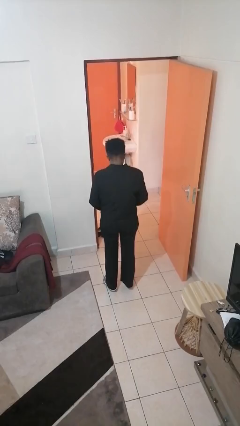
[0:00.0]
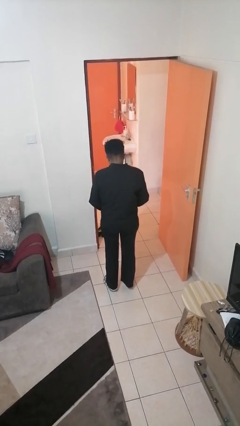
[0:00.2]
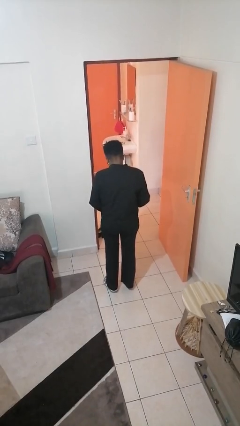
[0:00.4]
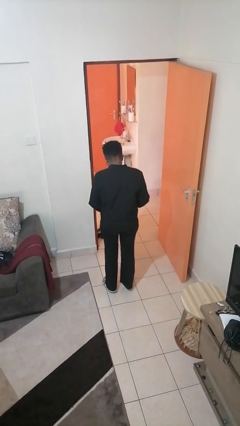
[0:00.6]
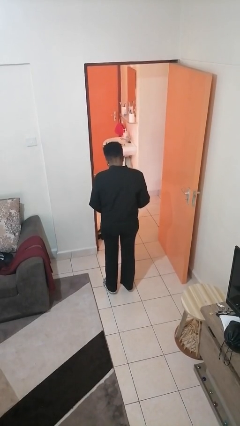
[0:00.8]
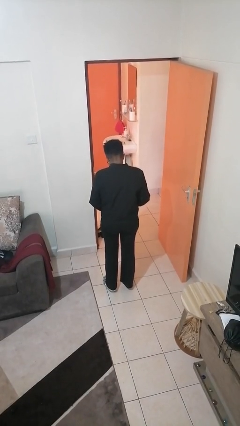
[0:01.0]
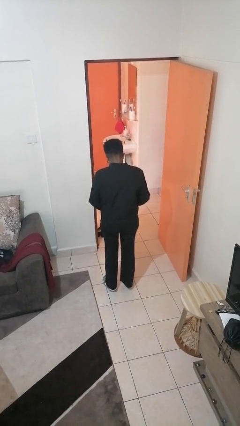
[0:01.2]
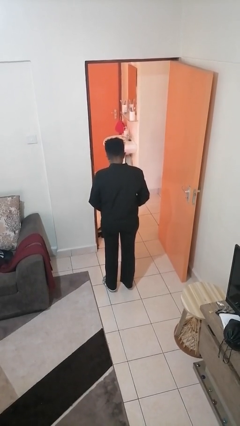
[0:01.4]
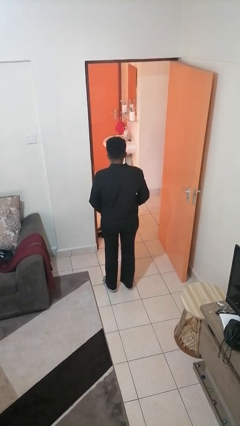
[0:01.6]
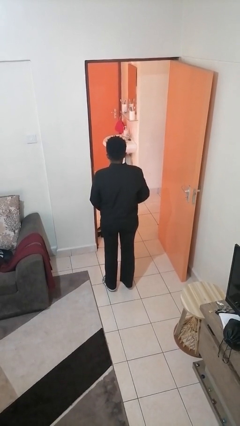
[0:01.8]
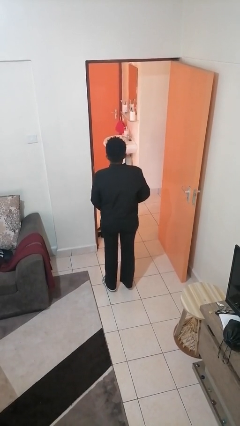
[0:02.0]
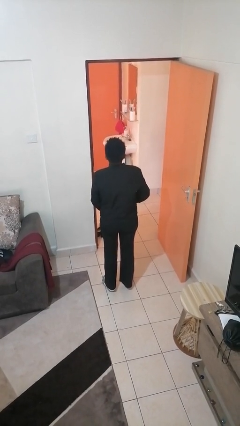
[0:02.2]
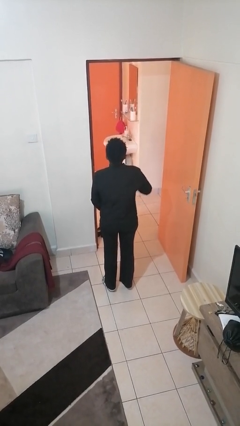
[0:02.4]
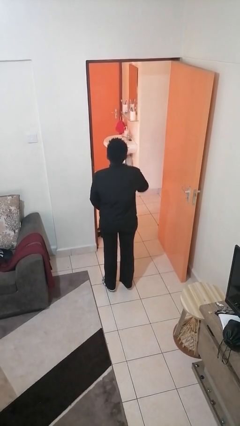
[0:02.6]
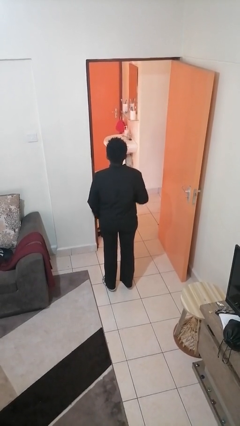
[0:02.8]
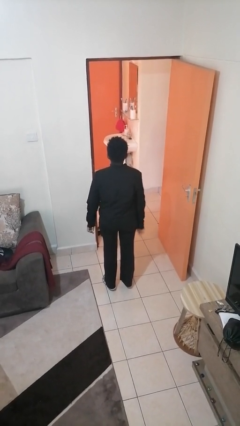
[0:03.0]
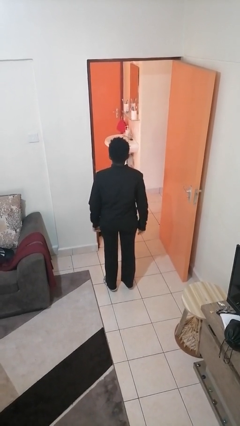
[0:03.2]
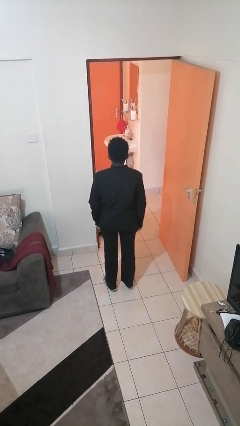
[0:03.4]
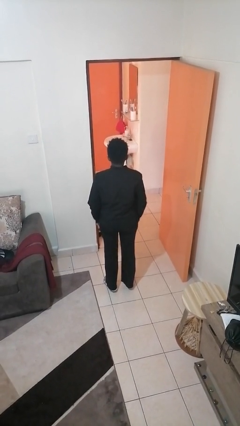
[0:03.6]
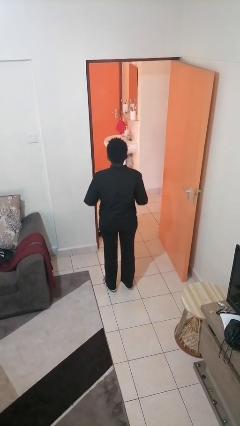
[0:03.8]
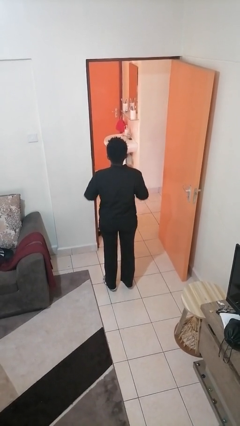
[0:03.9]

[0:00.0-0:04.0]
person zips up jacket

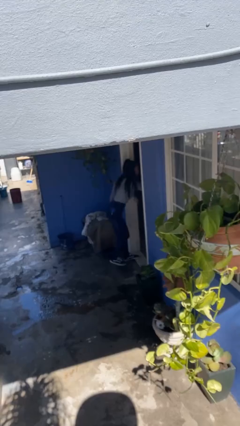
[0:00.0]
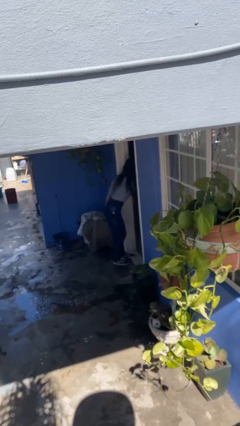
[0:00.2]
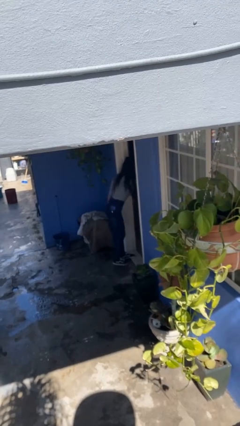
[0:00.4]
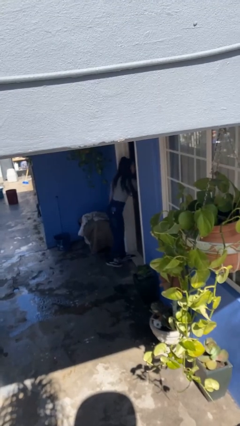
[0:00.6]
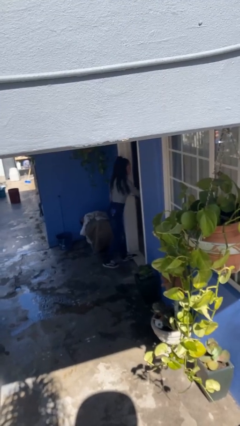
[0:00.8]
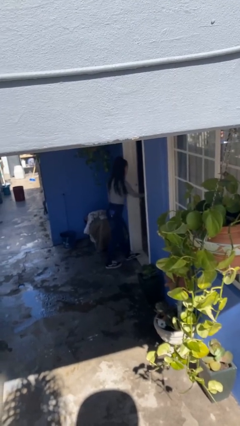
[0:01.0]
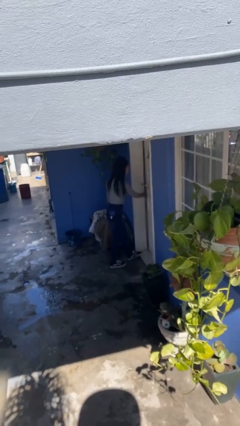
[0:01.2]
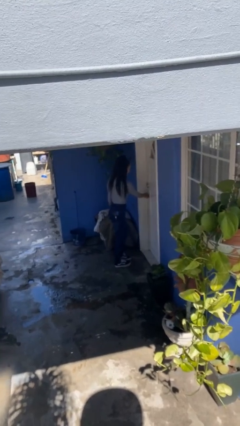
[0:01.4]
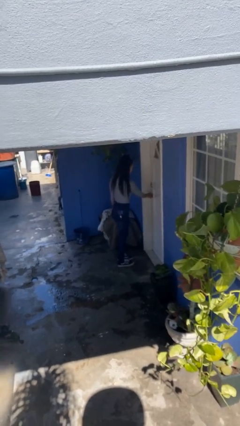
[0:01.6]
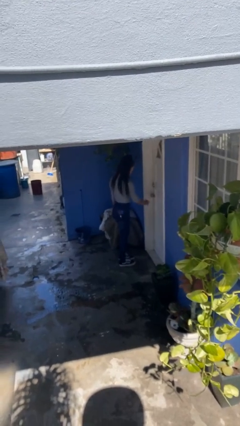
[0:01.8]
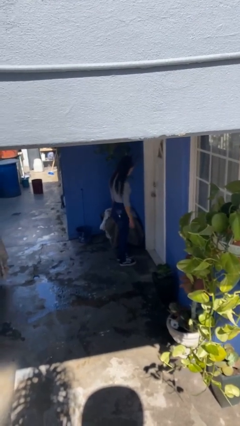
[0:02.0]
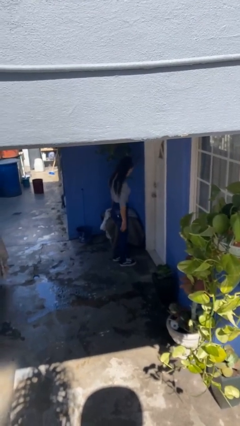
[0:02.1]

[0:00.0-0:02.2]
person closes facility door

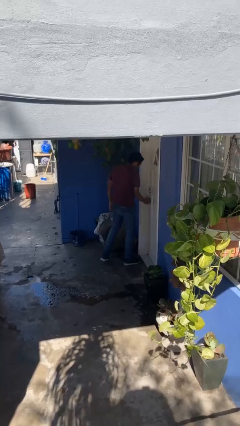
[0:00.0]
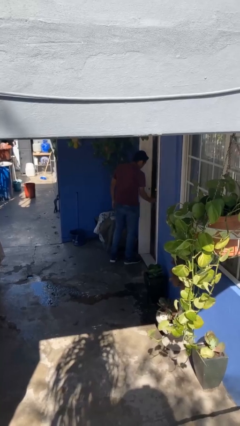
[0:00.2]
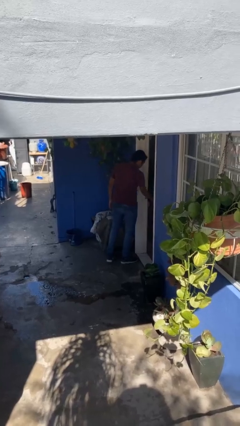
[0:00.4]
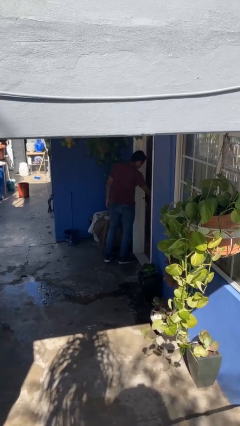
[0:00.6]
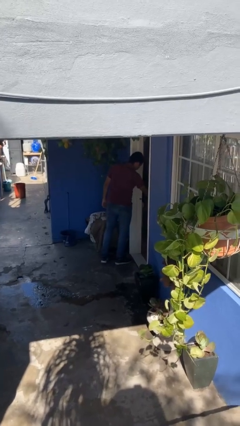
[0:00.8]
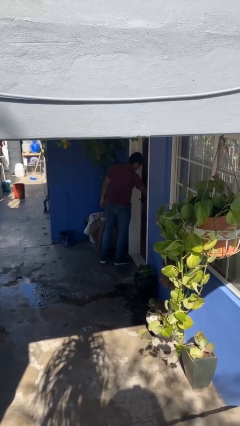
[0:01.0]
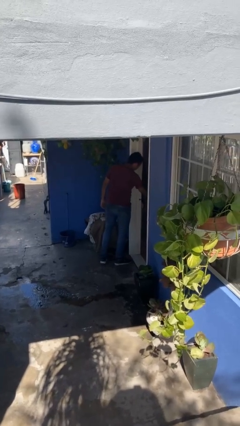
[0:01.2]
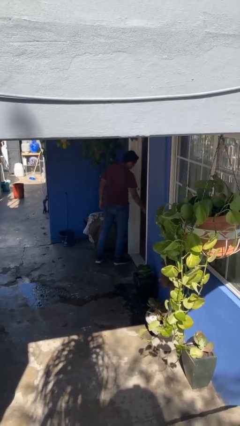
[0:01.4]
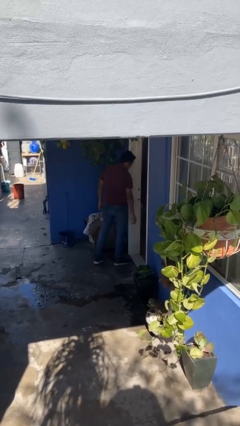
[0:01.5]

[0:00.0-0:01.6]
person opens facility door

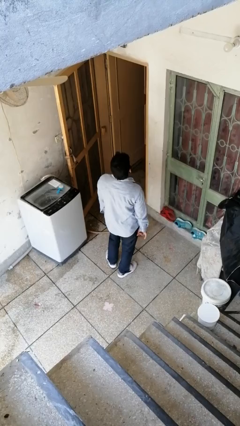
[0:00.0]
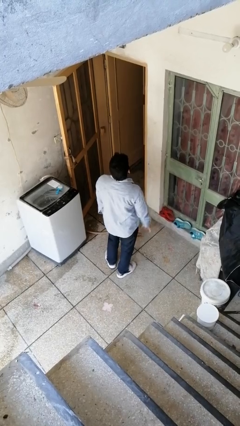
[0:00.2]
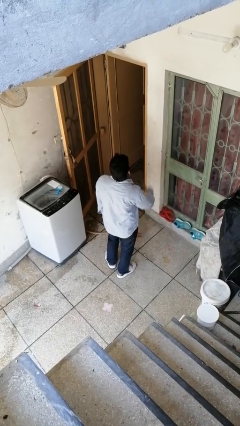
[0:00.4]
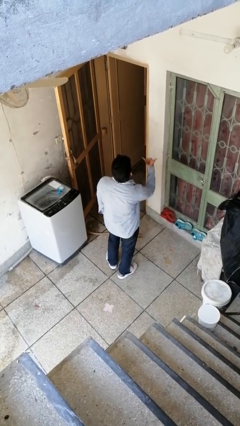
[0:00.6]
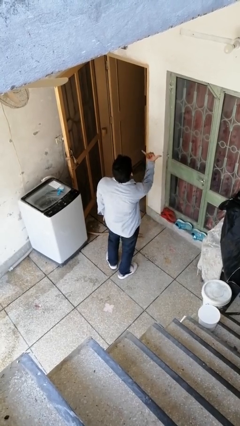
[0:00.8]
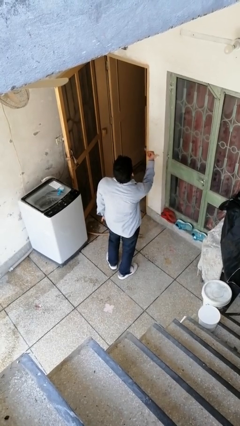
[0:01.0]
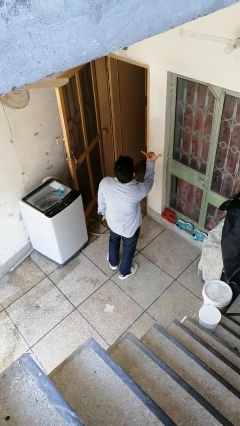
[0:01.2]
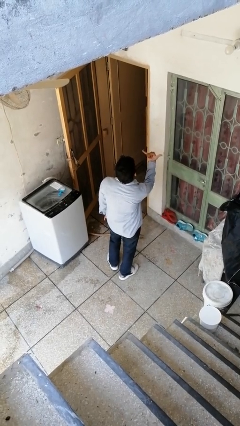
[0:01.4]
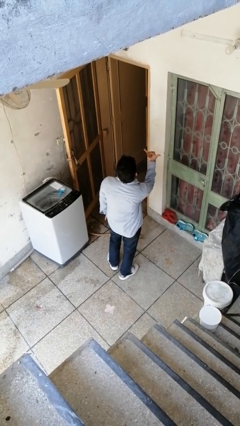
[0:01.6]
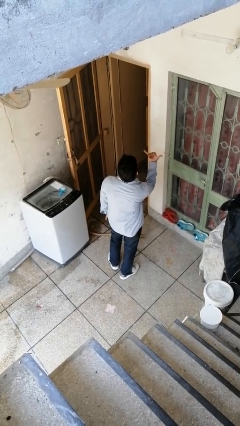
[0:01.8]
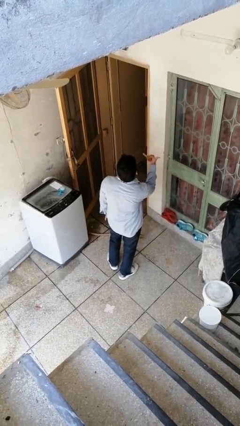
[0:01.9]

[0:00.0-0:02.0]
person gestures hang loose

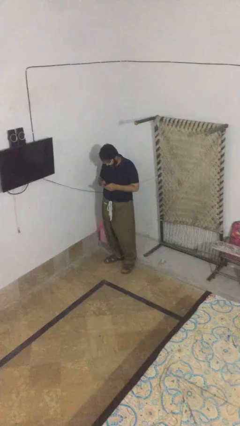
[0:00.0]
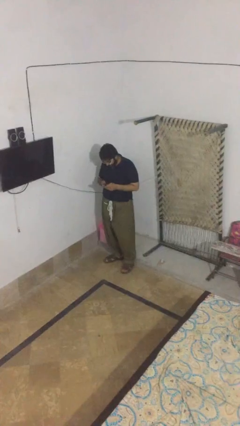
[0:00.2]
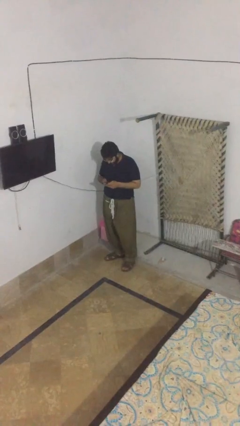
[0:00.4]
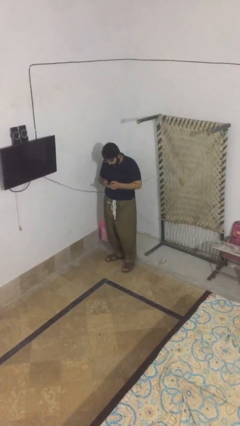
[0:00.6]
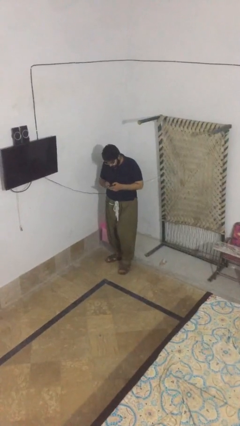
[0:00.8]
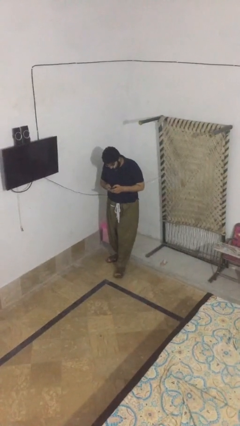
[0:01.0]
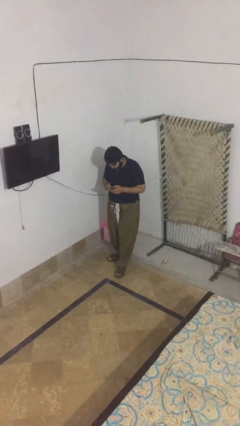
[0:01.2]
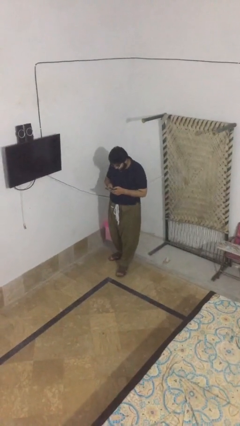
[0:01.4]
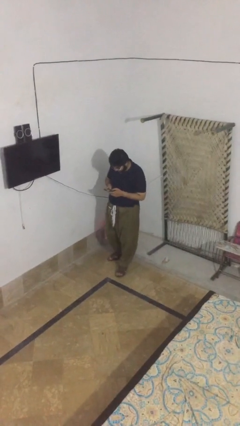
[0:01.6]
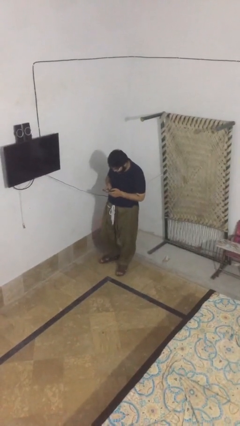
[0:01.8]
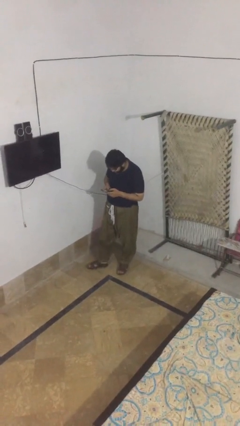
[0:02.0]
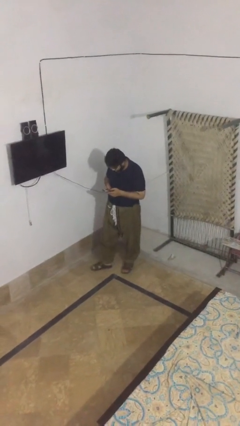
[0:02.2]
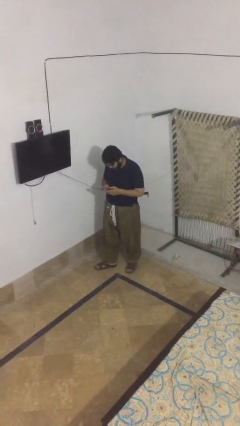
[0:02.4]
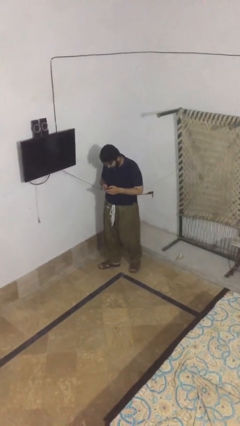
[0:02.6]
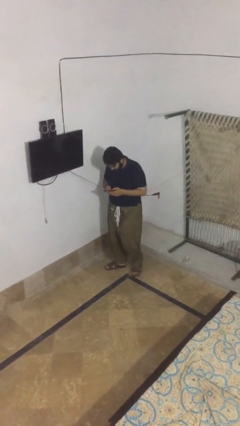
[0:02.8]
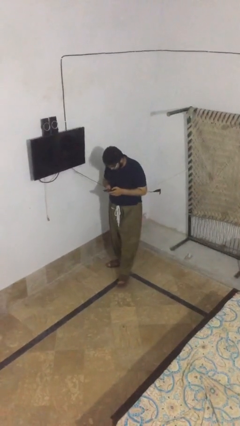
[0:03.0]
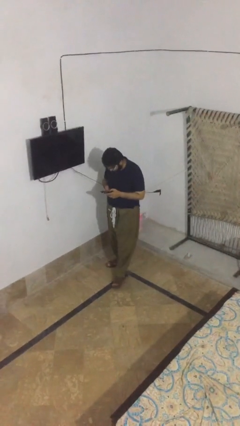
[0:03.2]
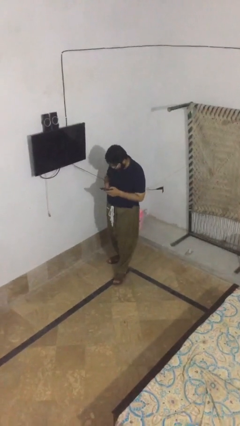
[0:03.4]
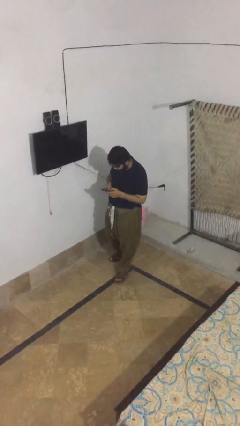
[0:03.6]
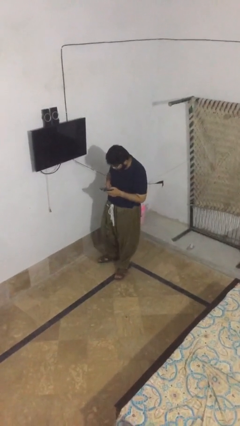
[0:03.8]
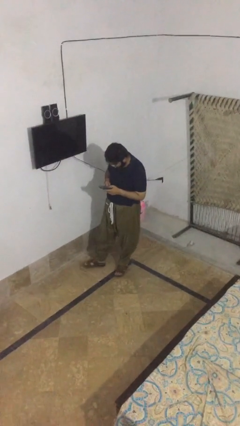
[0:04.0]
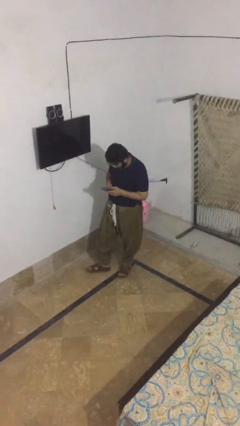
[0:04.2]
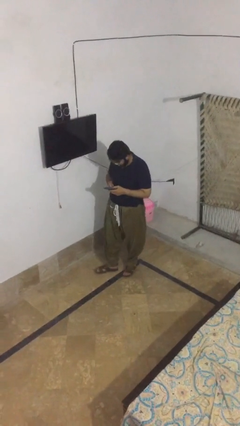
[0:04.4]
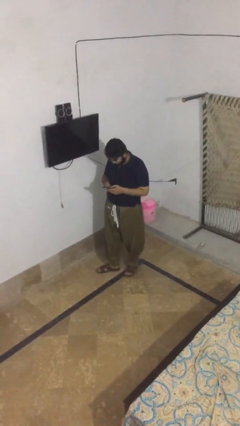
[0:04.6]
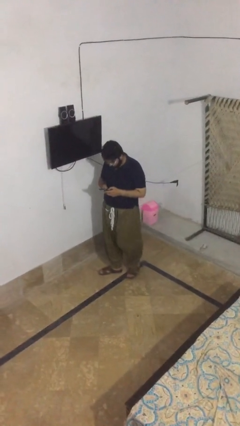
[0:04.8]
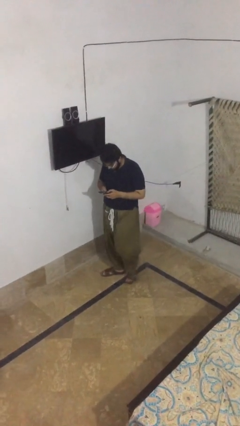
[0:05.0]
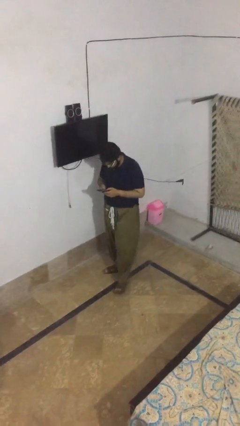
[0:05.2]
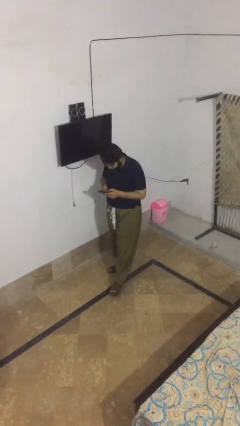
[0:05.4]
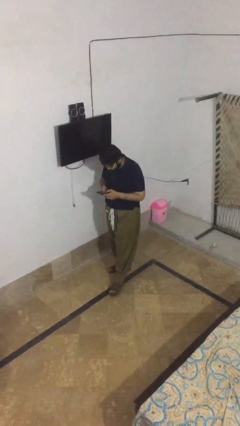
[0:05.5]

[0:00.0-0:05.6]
person texts on phone

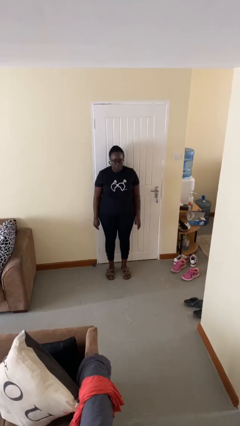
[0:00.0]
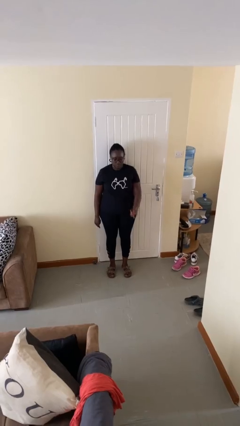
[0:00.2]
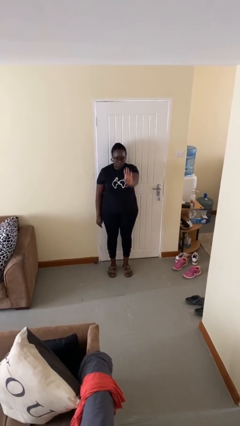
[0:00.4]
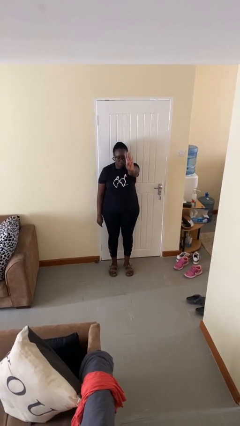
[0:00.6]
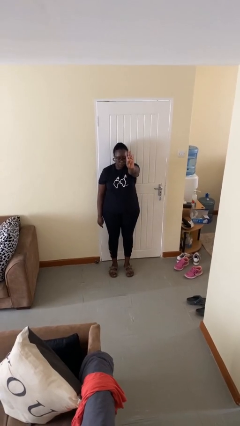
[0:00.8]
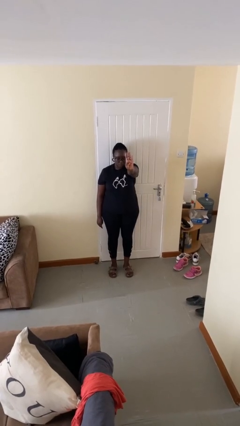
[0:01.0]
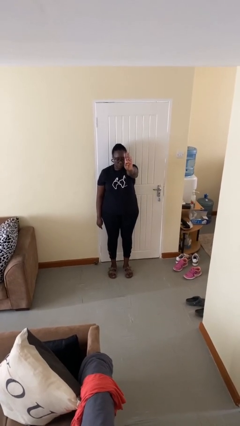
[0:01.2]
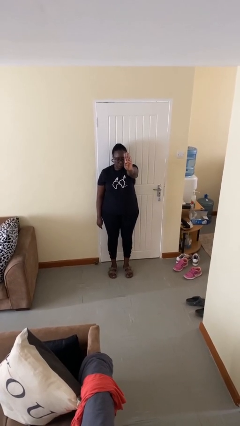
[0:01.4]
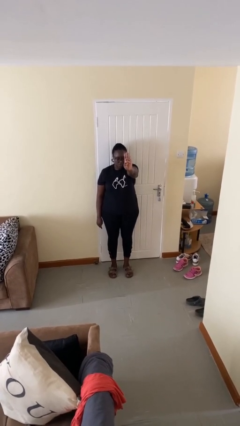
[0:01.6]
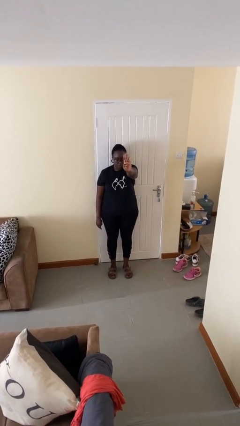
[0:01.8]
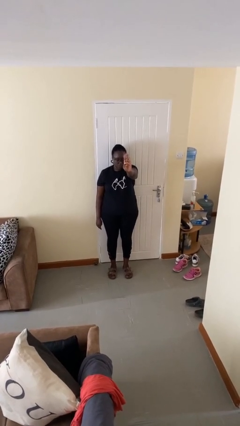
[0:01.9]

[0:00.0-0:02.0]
person gestures number four

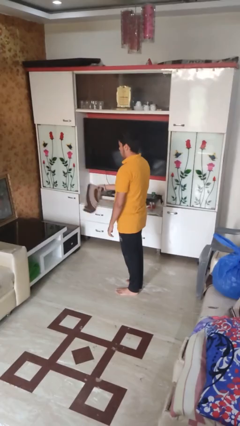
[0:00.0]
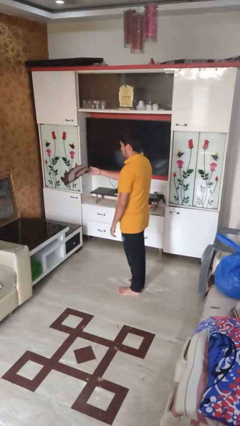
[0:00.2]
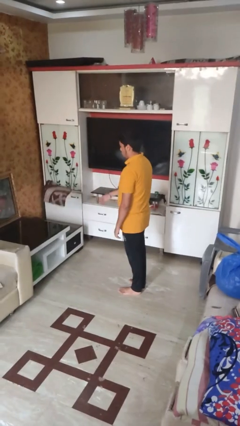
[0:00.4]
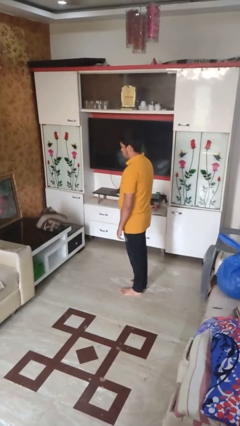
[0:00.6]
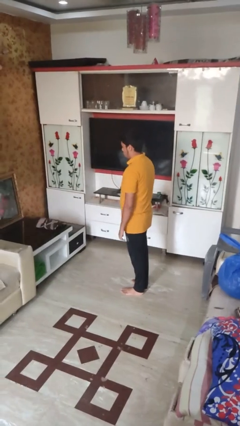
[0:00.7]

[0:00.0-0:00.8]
person throws object on table
